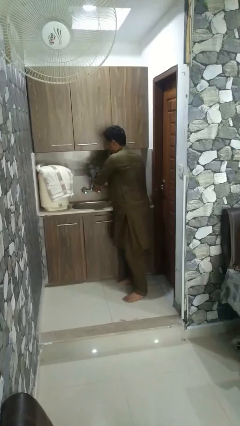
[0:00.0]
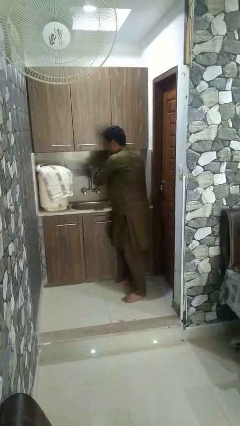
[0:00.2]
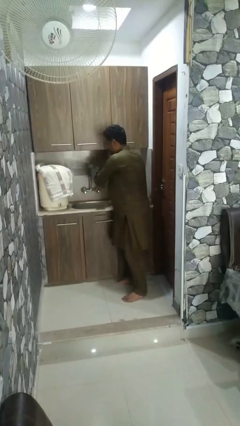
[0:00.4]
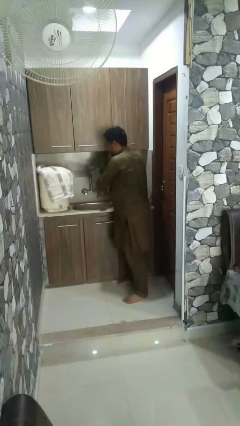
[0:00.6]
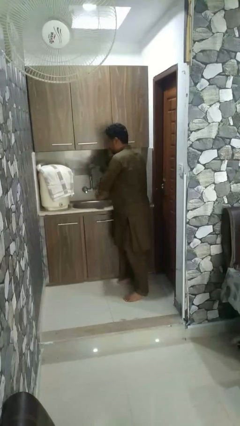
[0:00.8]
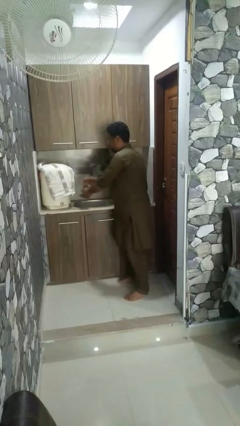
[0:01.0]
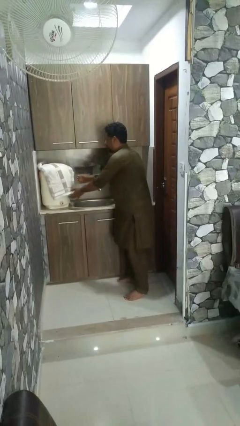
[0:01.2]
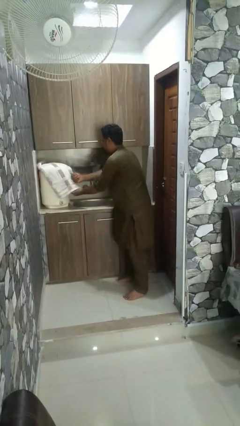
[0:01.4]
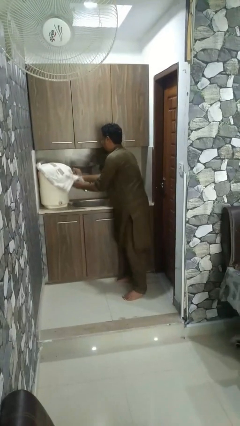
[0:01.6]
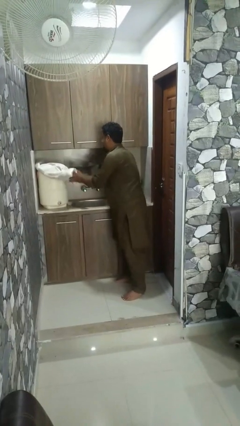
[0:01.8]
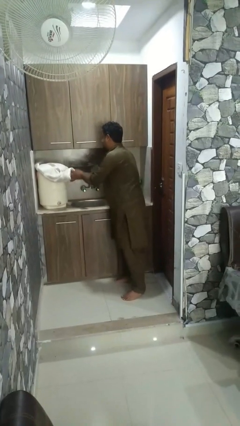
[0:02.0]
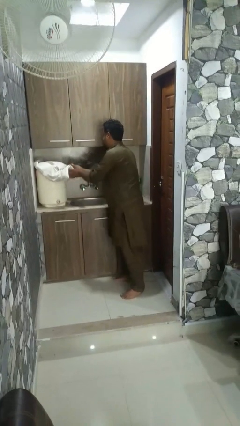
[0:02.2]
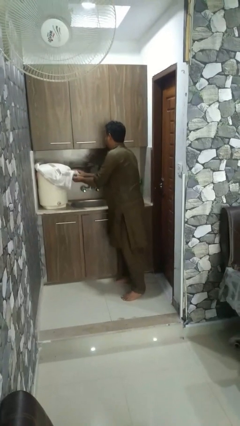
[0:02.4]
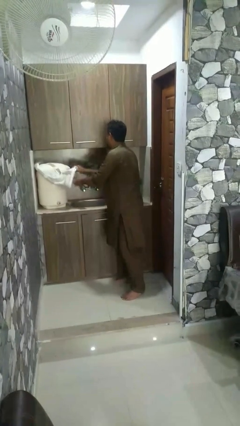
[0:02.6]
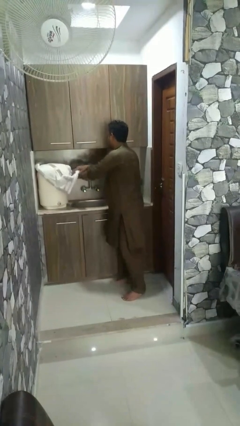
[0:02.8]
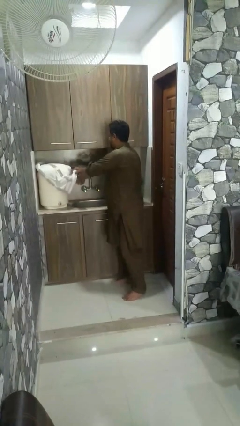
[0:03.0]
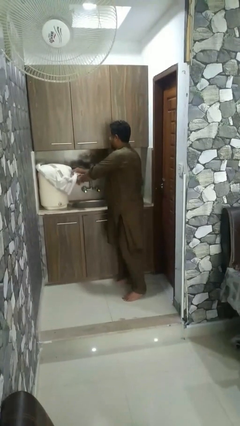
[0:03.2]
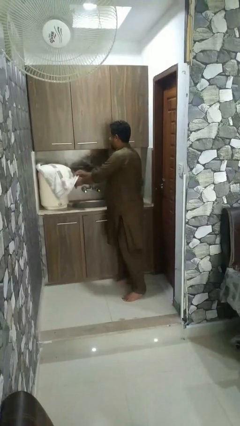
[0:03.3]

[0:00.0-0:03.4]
person dries hands with towel

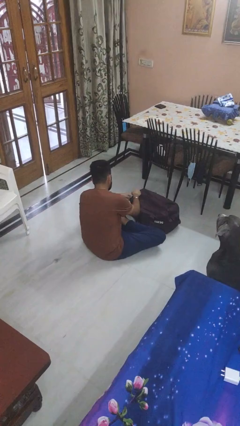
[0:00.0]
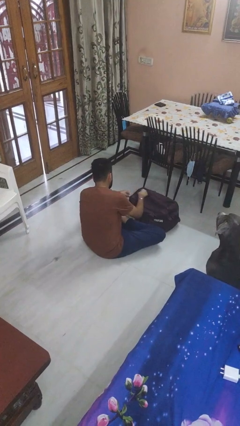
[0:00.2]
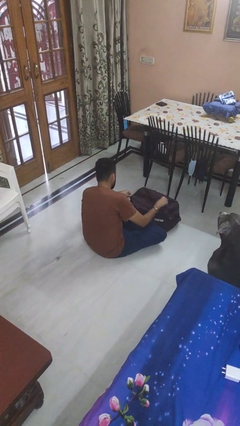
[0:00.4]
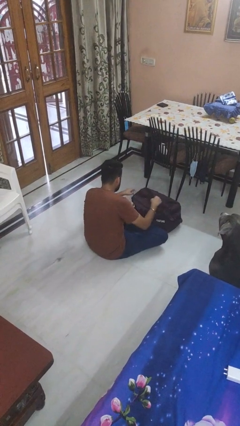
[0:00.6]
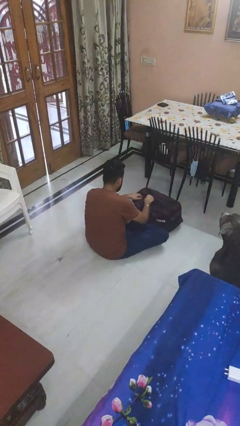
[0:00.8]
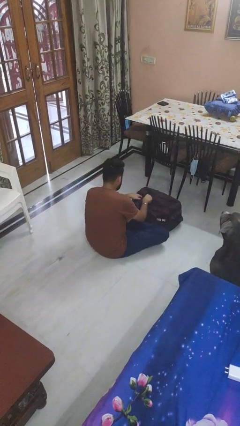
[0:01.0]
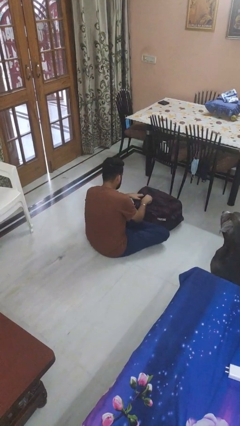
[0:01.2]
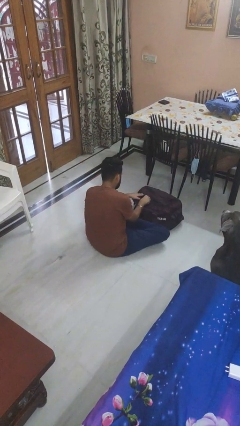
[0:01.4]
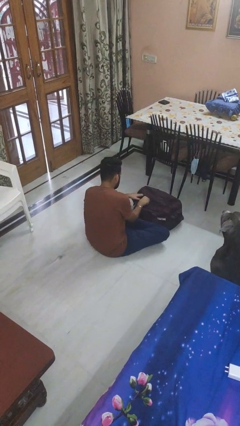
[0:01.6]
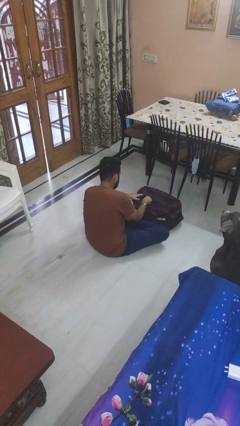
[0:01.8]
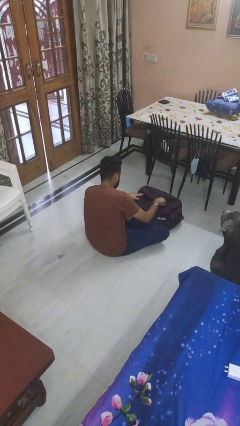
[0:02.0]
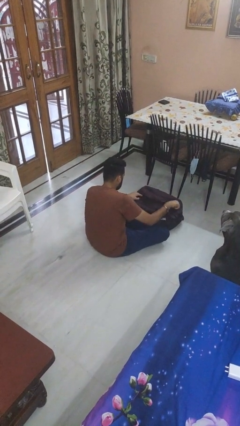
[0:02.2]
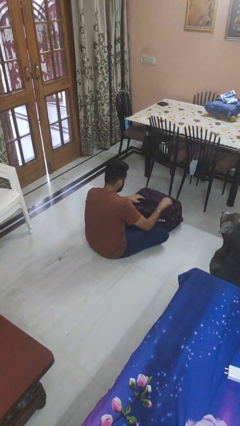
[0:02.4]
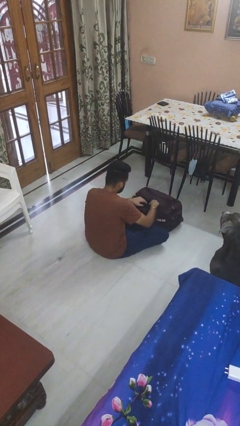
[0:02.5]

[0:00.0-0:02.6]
person opens suitcase

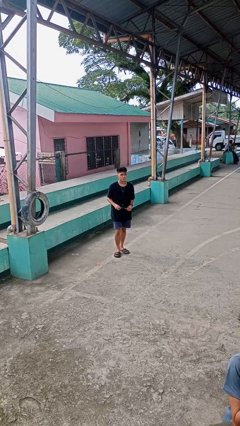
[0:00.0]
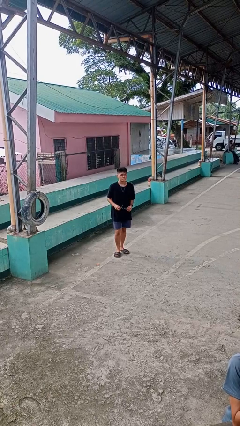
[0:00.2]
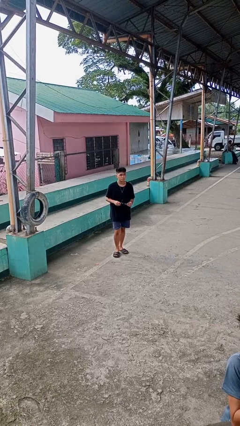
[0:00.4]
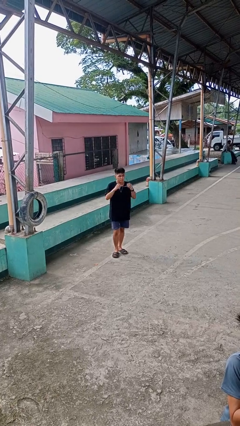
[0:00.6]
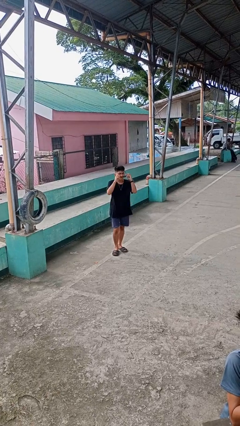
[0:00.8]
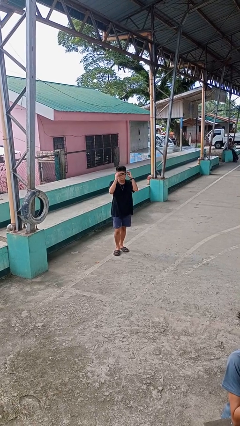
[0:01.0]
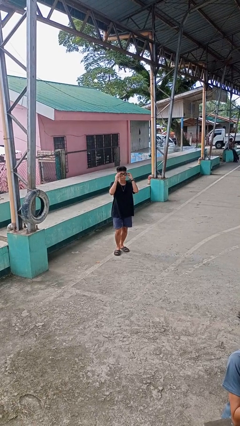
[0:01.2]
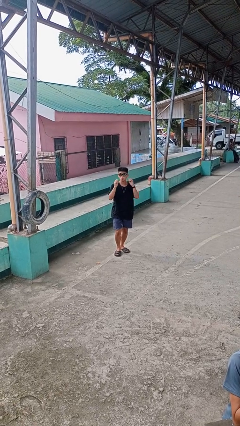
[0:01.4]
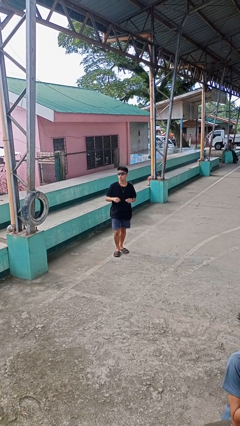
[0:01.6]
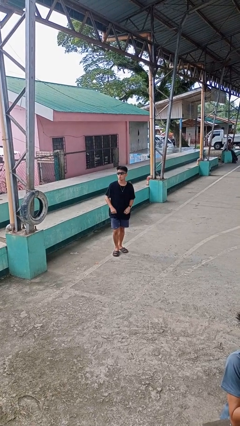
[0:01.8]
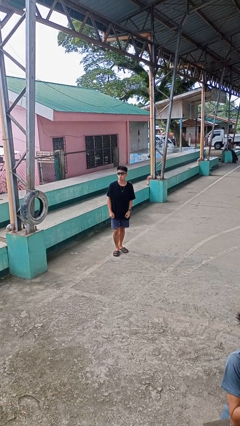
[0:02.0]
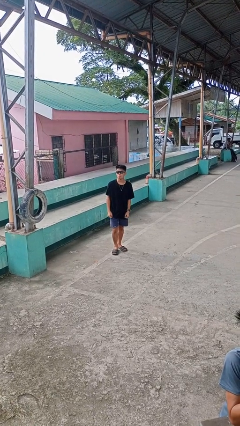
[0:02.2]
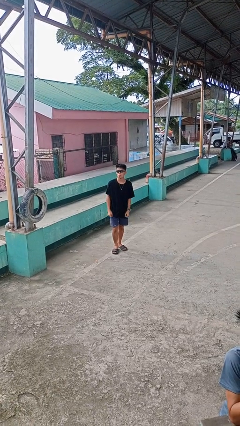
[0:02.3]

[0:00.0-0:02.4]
person puts on sunglasses

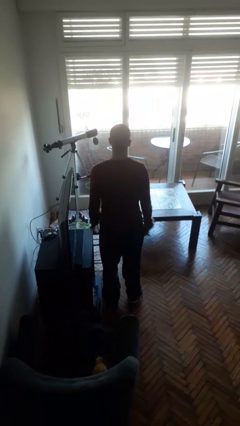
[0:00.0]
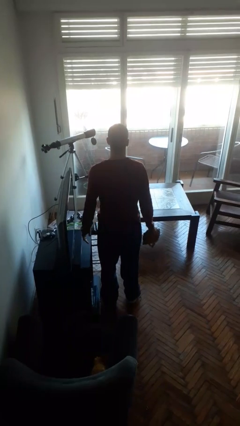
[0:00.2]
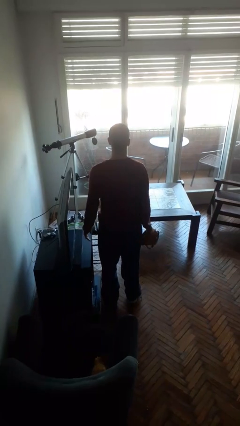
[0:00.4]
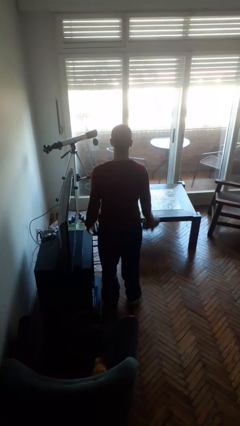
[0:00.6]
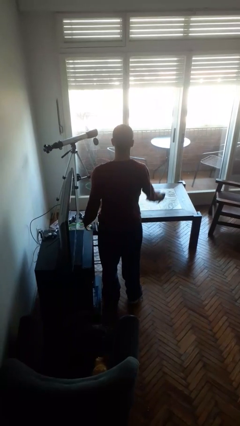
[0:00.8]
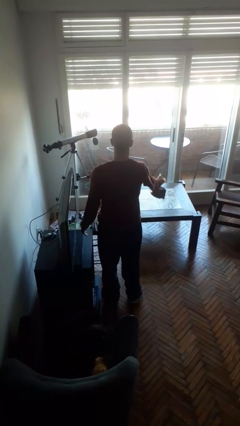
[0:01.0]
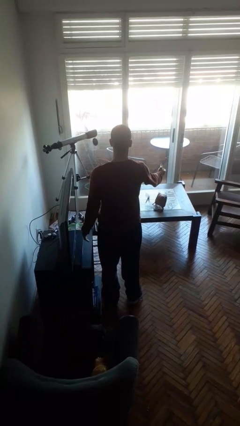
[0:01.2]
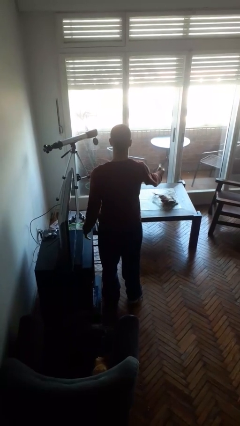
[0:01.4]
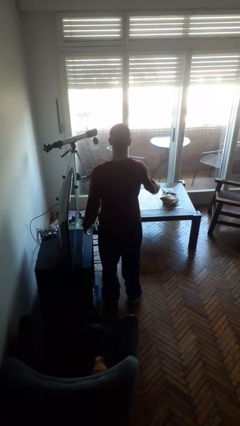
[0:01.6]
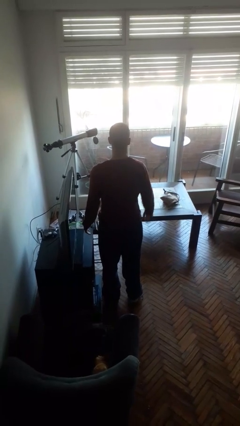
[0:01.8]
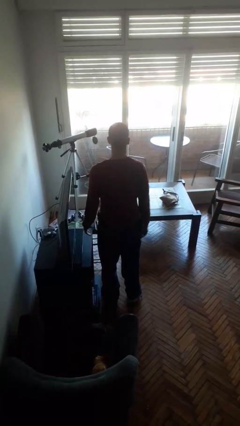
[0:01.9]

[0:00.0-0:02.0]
person throws object on table

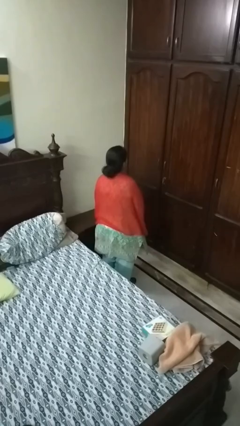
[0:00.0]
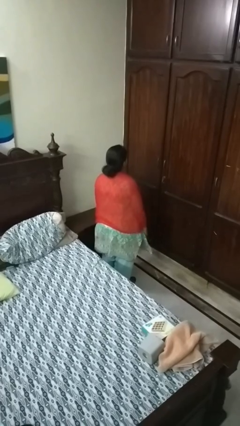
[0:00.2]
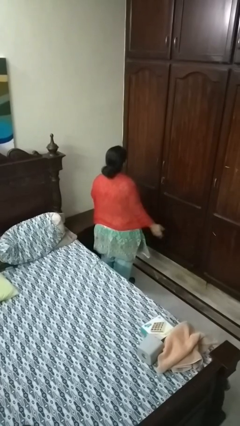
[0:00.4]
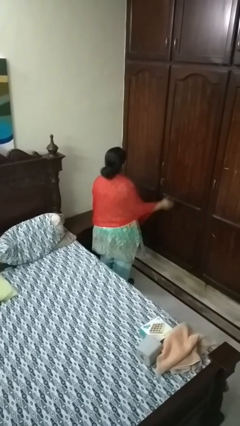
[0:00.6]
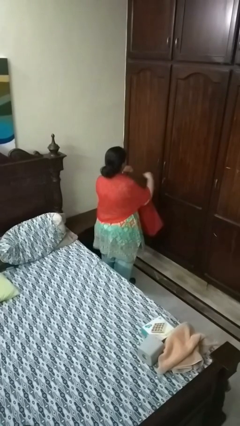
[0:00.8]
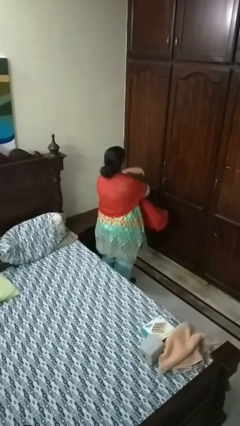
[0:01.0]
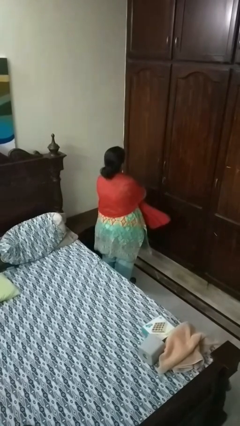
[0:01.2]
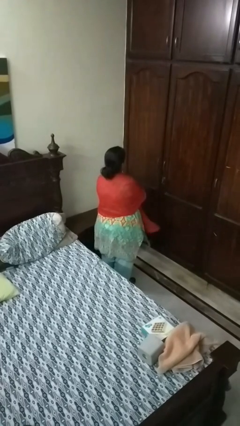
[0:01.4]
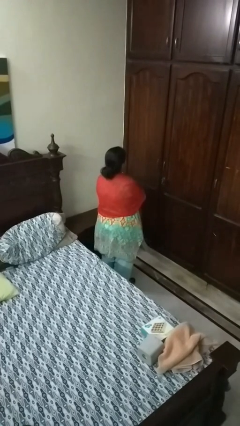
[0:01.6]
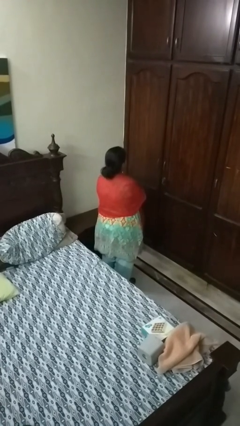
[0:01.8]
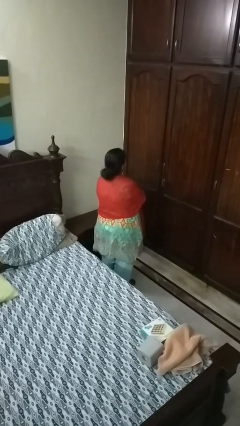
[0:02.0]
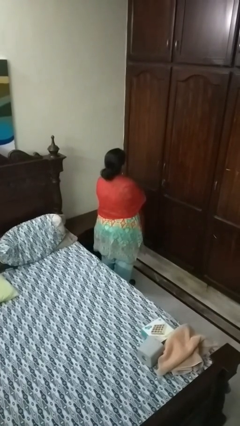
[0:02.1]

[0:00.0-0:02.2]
person crosses arms

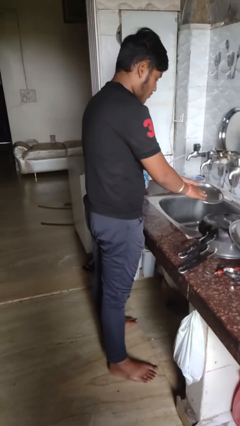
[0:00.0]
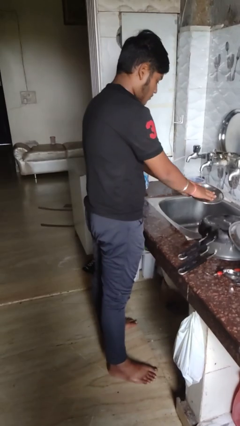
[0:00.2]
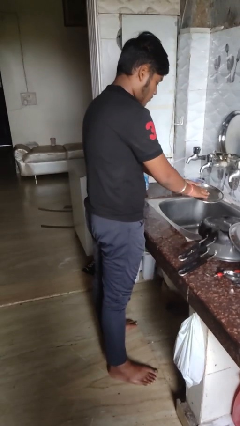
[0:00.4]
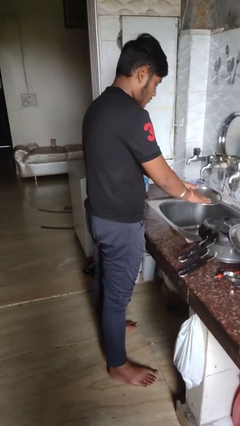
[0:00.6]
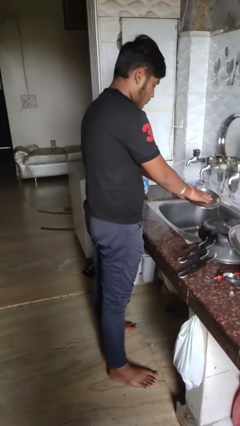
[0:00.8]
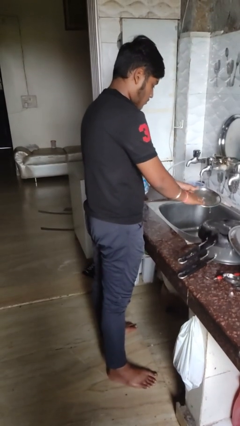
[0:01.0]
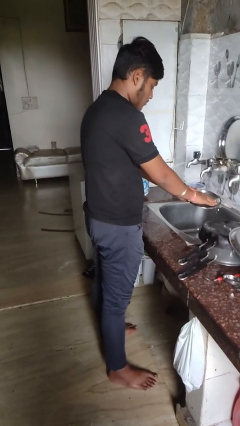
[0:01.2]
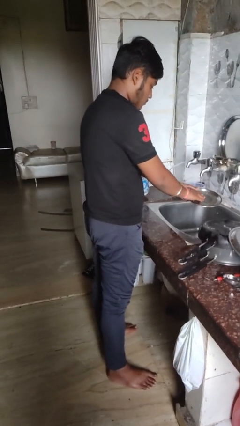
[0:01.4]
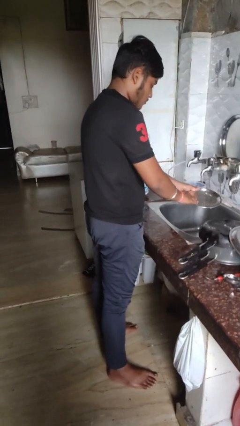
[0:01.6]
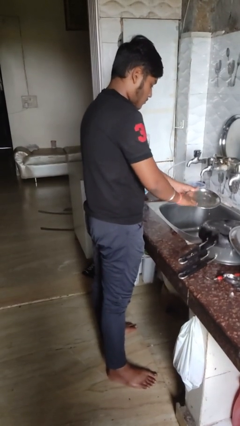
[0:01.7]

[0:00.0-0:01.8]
person washes dish

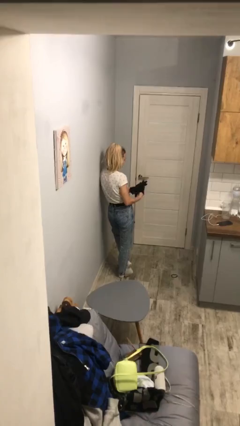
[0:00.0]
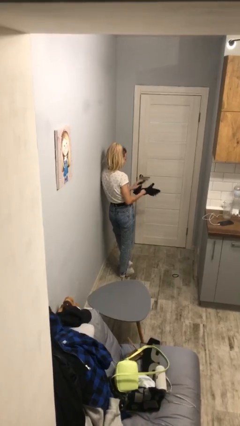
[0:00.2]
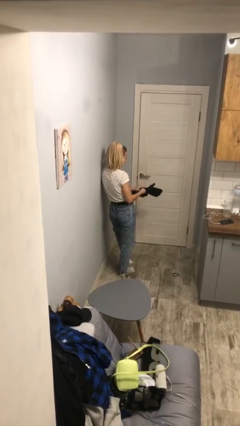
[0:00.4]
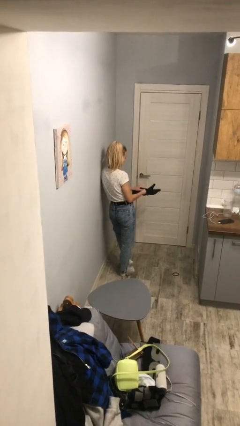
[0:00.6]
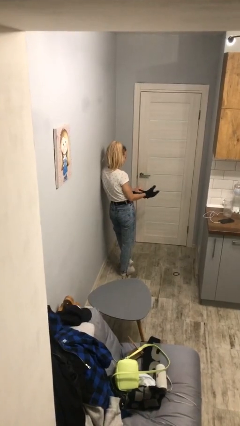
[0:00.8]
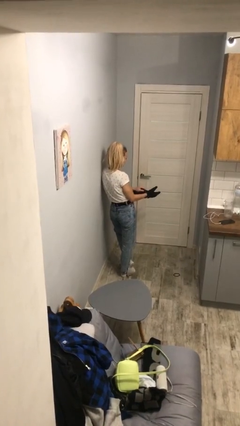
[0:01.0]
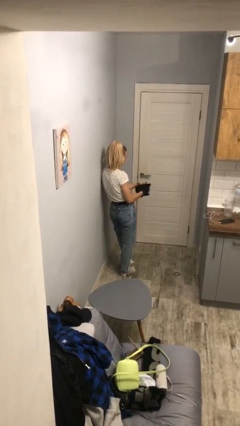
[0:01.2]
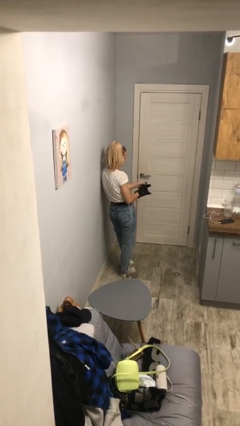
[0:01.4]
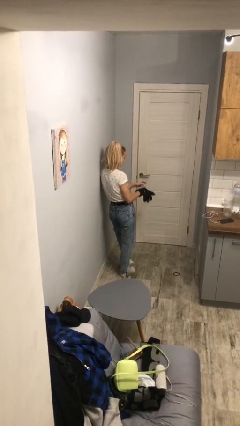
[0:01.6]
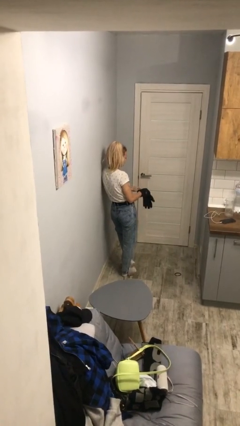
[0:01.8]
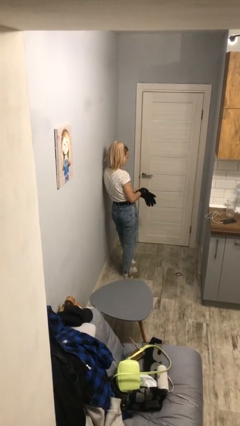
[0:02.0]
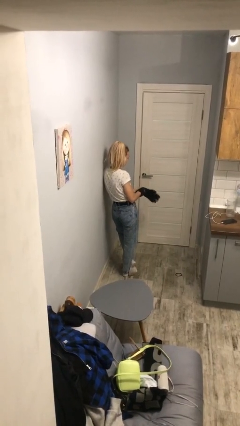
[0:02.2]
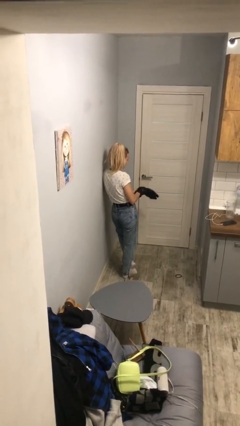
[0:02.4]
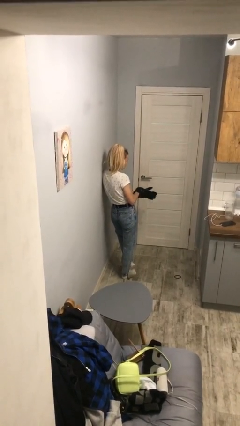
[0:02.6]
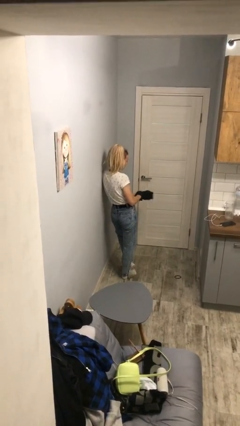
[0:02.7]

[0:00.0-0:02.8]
person puts on gloves
